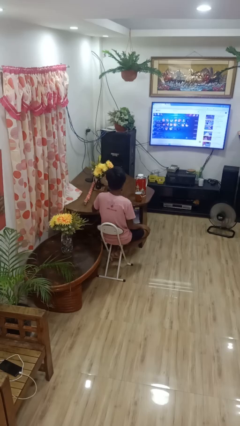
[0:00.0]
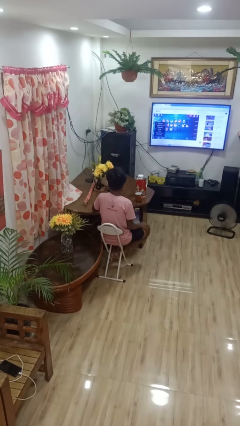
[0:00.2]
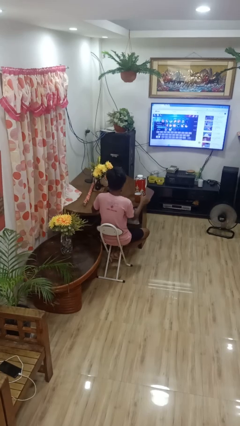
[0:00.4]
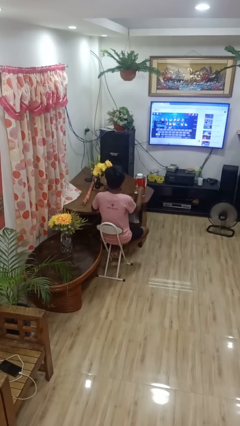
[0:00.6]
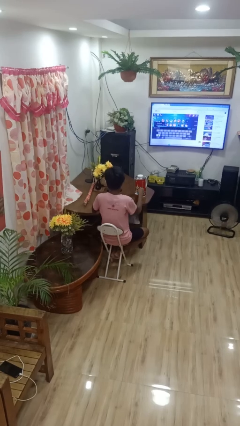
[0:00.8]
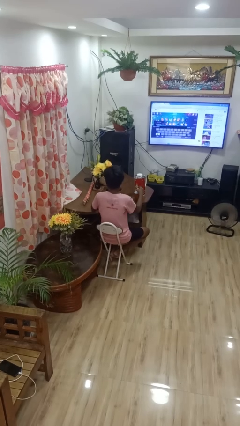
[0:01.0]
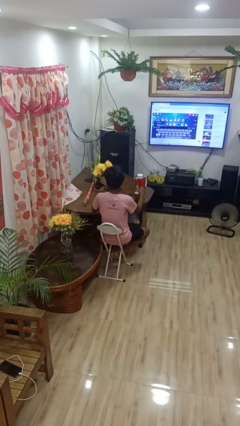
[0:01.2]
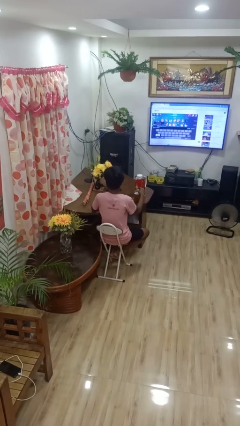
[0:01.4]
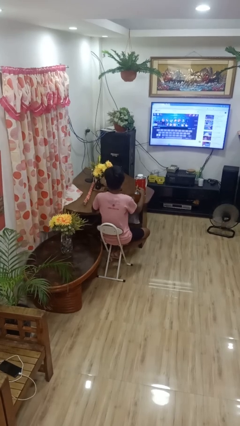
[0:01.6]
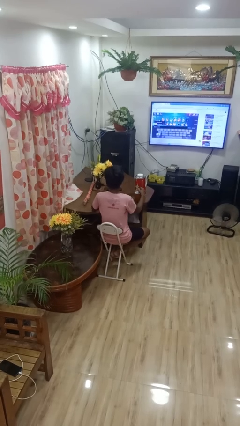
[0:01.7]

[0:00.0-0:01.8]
person stirs mug

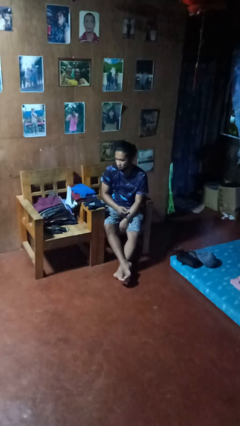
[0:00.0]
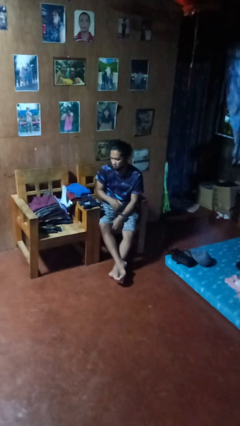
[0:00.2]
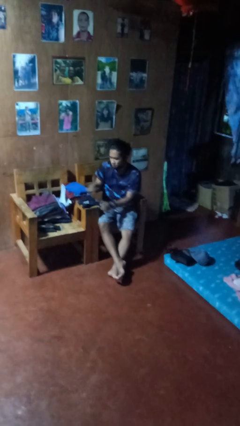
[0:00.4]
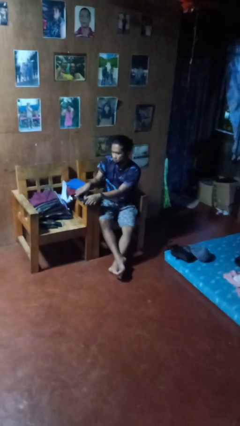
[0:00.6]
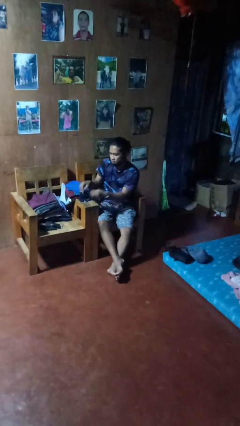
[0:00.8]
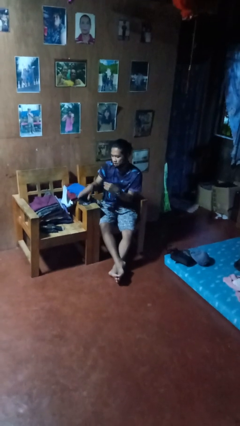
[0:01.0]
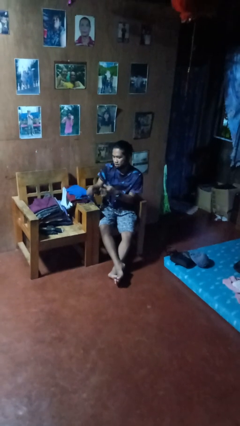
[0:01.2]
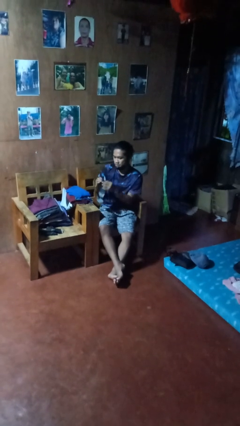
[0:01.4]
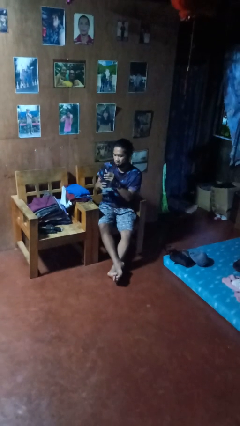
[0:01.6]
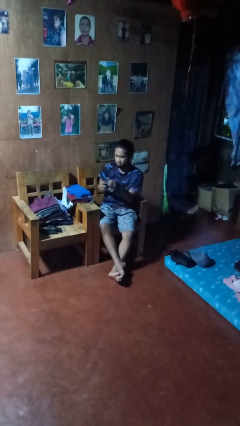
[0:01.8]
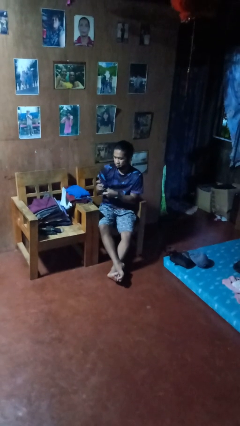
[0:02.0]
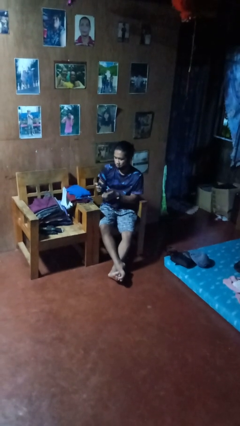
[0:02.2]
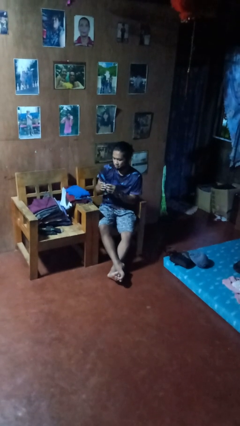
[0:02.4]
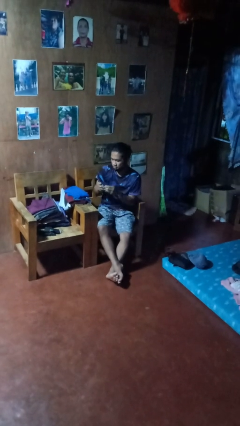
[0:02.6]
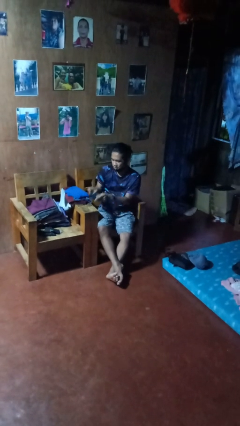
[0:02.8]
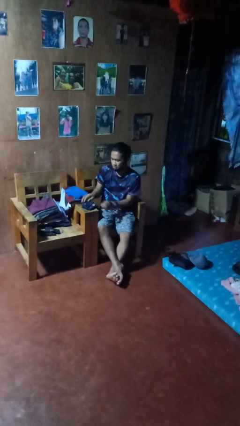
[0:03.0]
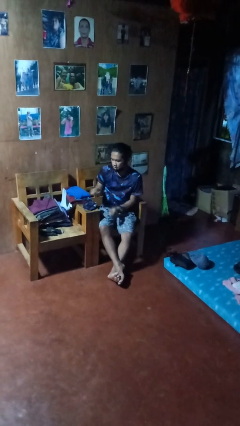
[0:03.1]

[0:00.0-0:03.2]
person folds socks

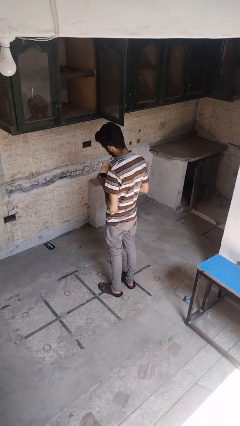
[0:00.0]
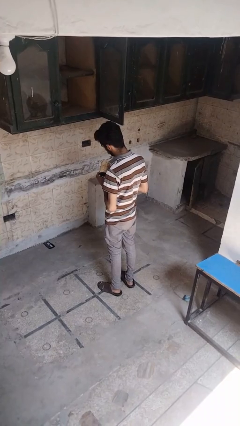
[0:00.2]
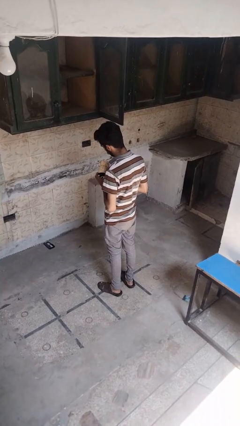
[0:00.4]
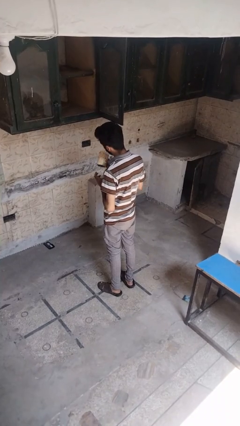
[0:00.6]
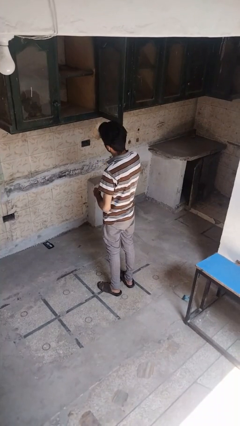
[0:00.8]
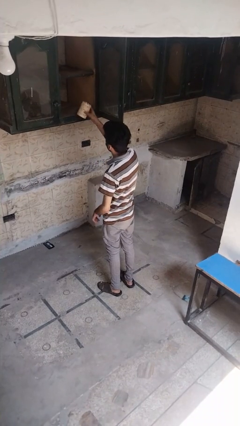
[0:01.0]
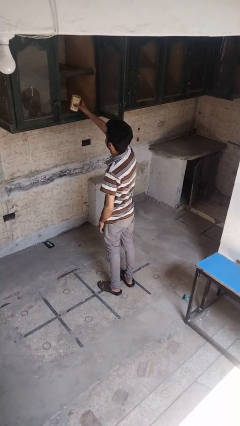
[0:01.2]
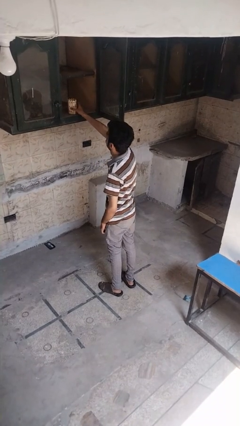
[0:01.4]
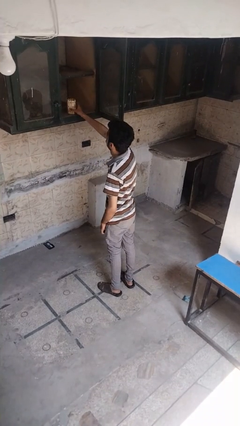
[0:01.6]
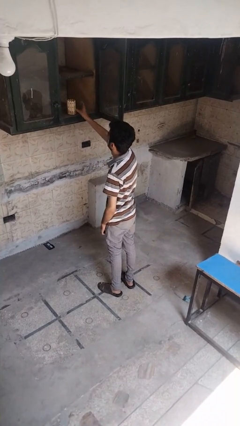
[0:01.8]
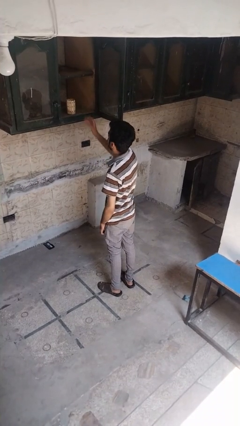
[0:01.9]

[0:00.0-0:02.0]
person puts down object into cabinet

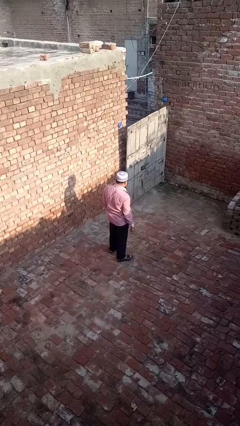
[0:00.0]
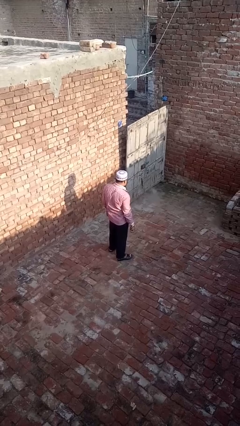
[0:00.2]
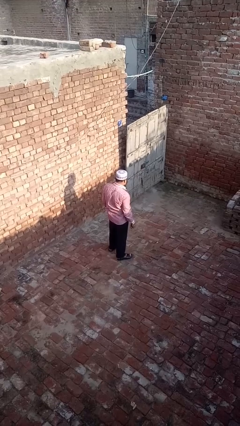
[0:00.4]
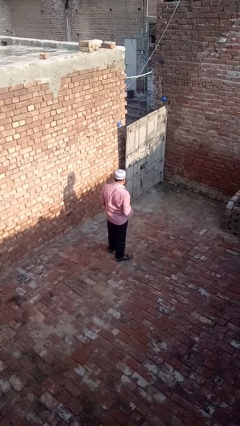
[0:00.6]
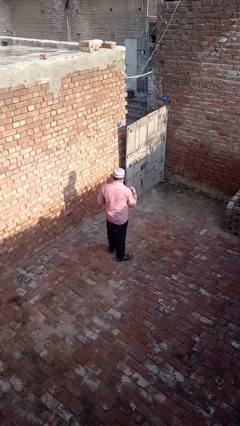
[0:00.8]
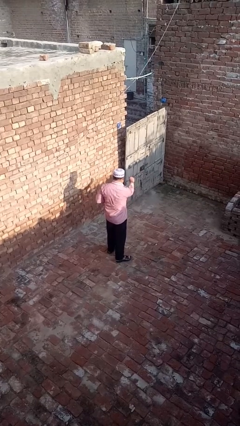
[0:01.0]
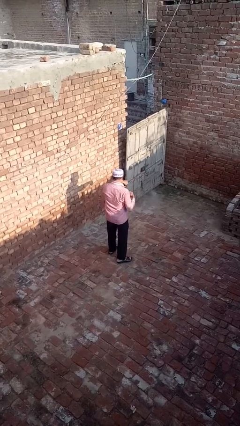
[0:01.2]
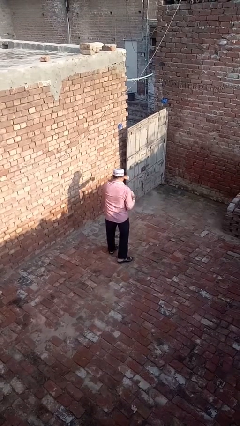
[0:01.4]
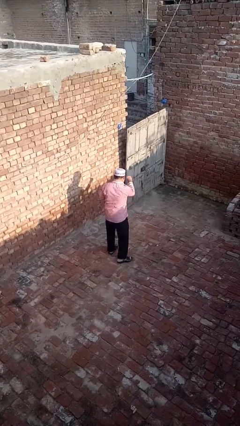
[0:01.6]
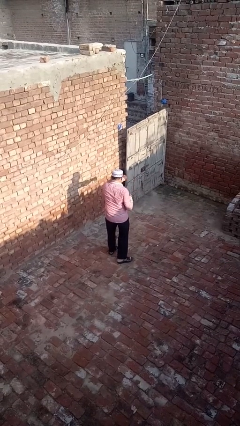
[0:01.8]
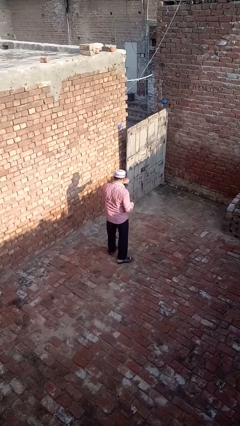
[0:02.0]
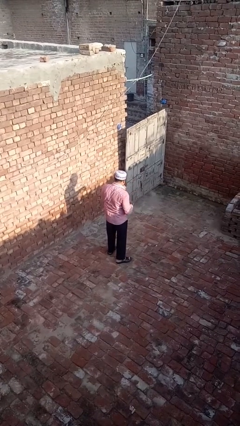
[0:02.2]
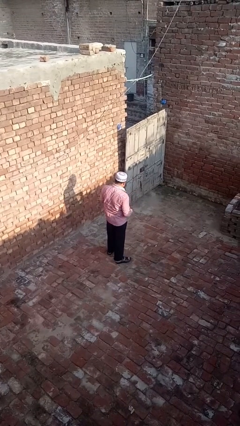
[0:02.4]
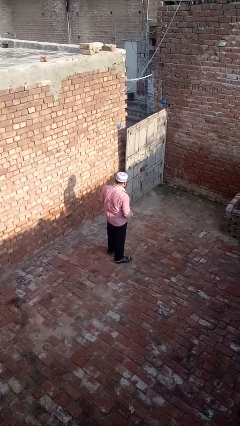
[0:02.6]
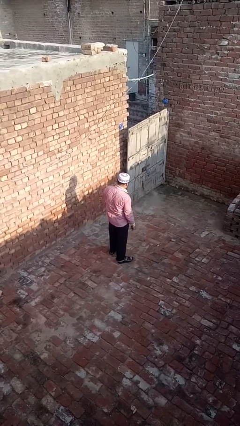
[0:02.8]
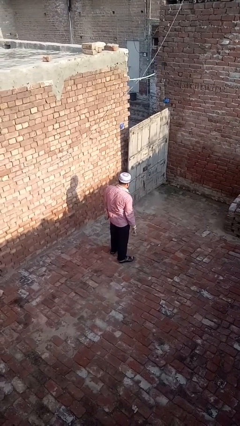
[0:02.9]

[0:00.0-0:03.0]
person punches

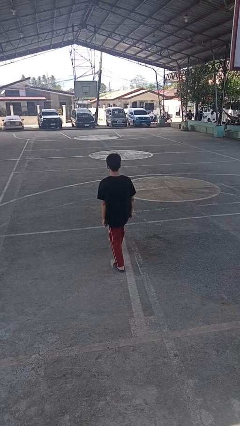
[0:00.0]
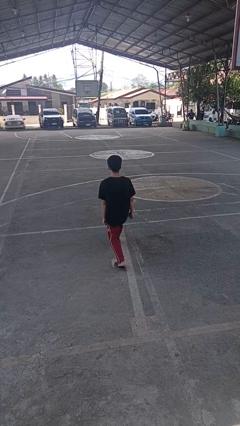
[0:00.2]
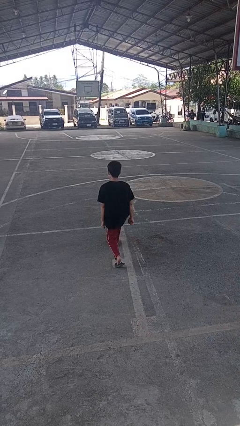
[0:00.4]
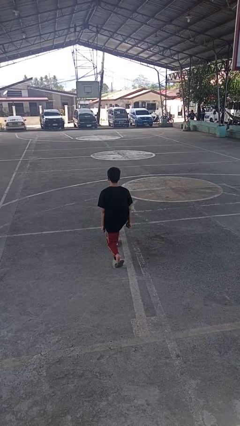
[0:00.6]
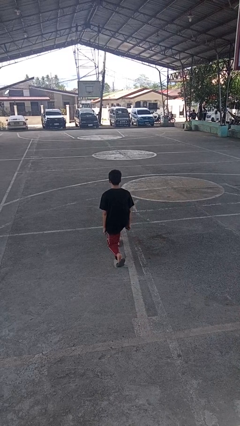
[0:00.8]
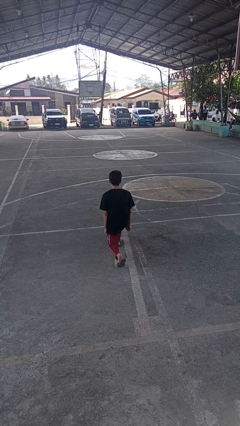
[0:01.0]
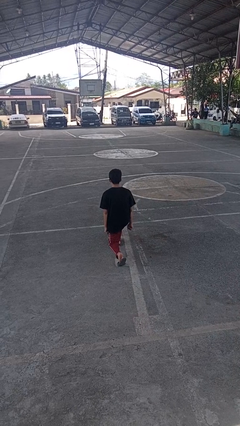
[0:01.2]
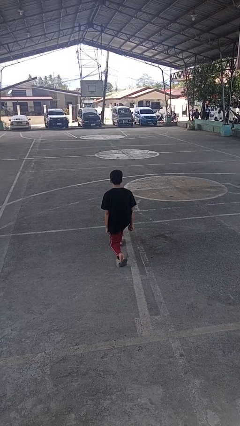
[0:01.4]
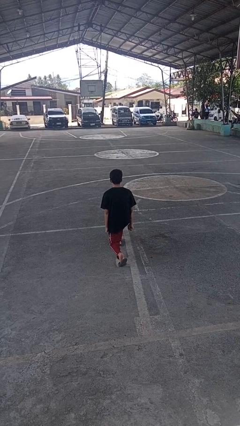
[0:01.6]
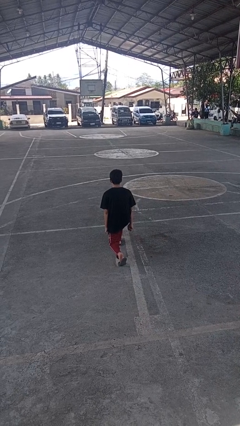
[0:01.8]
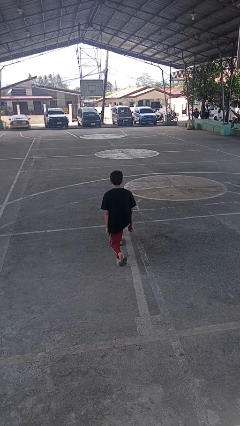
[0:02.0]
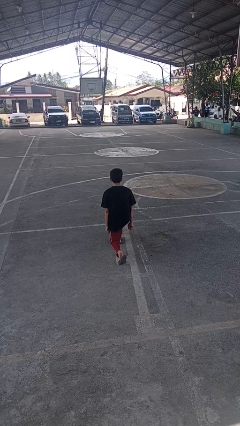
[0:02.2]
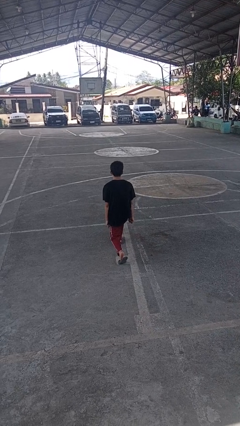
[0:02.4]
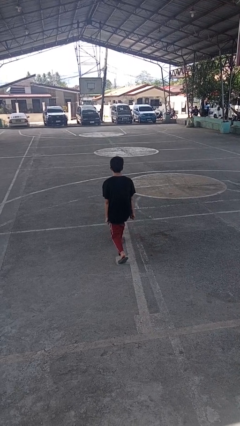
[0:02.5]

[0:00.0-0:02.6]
person exercises with lunges

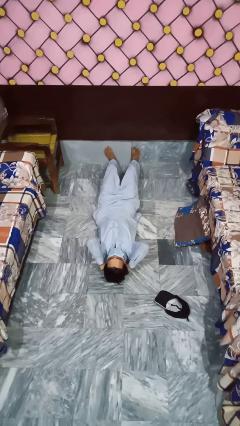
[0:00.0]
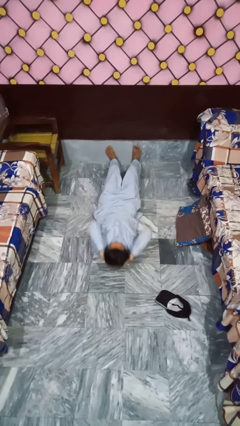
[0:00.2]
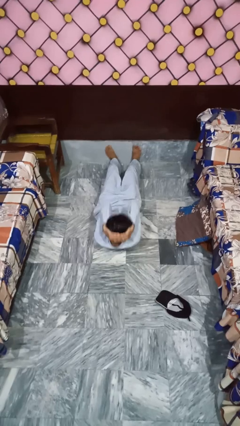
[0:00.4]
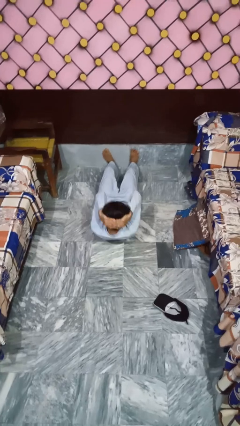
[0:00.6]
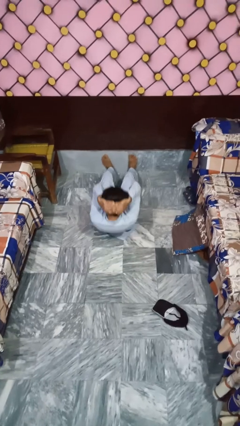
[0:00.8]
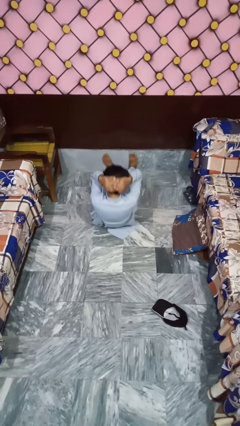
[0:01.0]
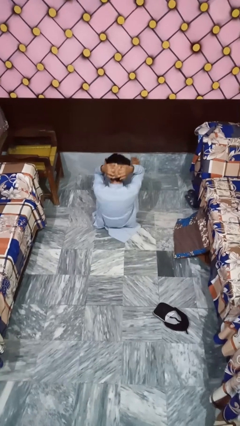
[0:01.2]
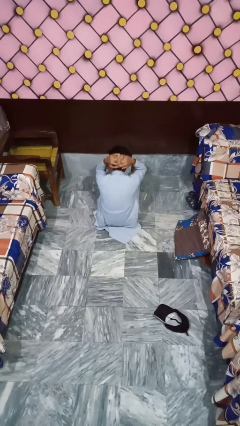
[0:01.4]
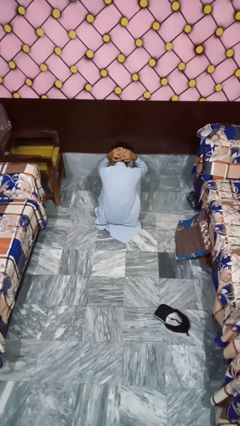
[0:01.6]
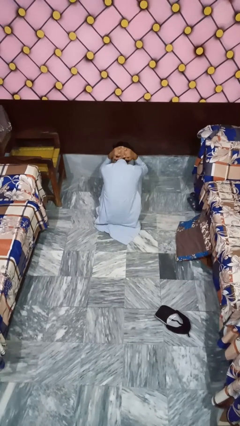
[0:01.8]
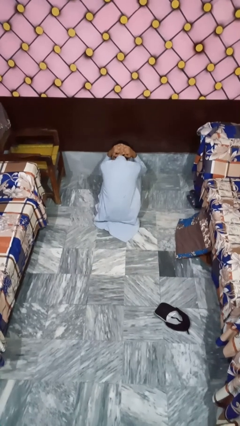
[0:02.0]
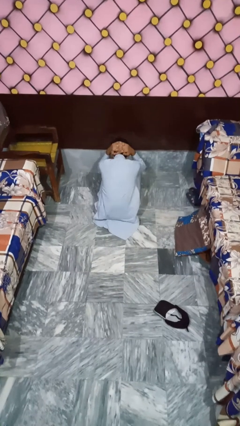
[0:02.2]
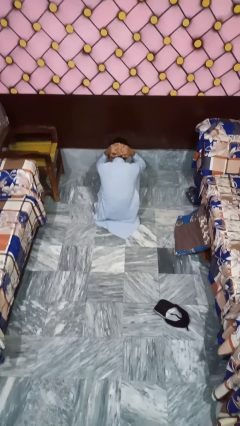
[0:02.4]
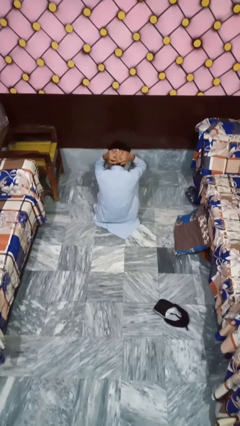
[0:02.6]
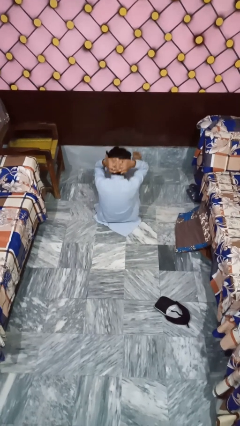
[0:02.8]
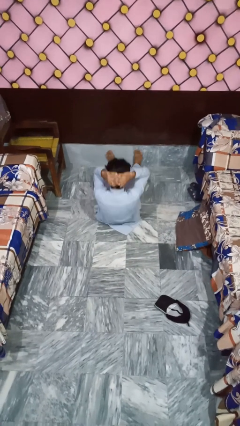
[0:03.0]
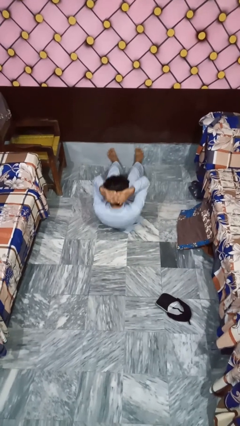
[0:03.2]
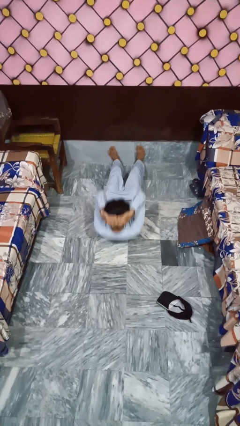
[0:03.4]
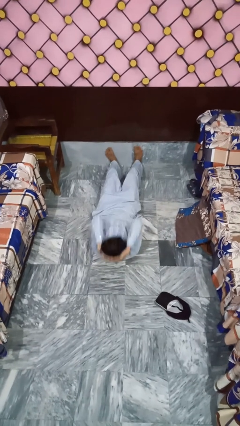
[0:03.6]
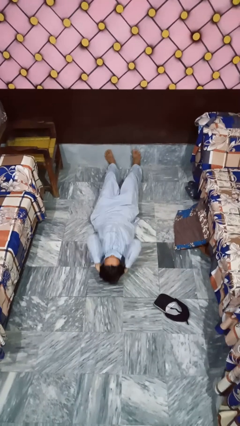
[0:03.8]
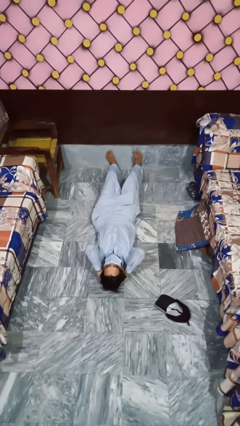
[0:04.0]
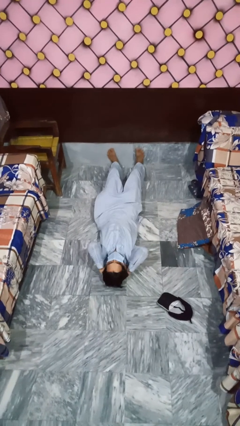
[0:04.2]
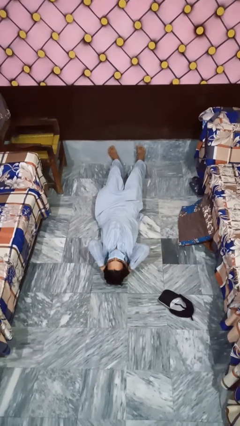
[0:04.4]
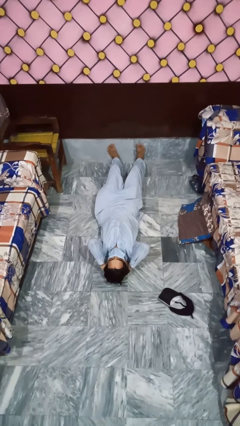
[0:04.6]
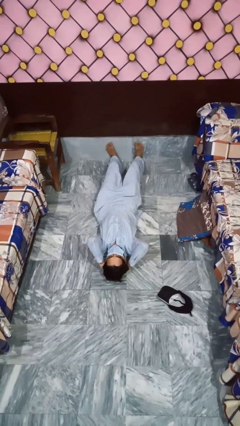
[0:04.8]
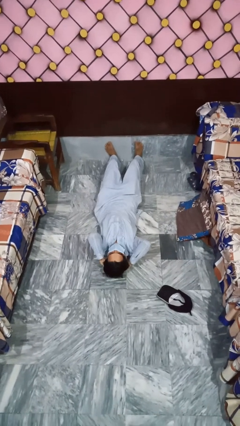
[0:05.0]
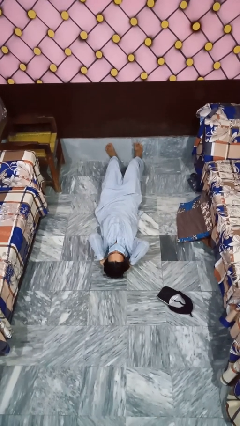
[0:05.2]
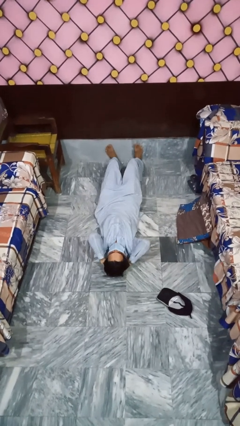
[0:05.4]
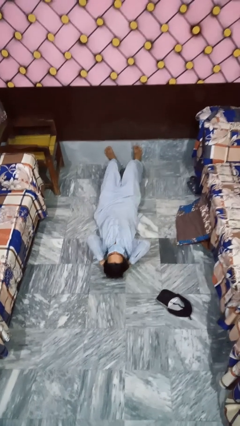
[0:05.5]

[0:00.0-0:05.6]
person exercises with situp
